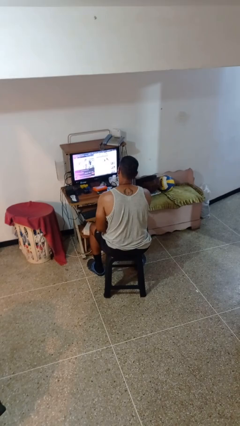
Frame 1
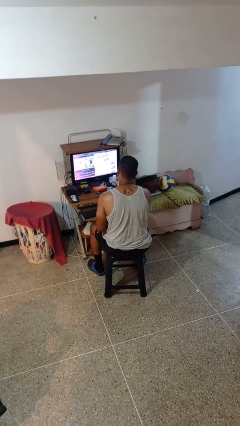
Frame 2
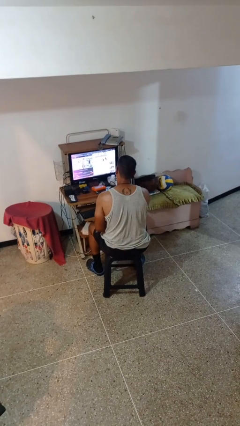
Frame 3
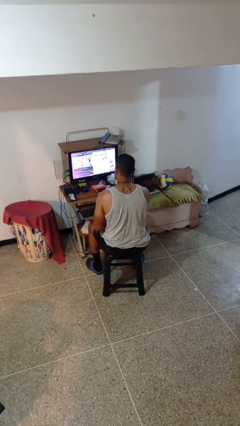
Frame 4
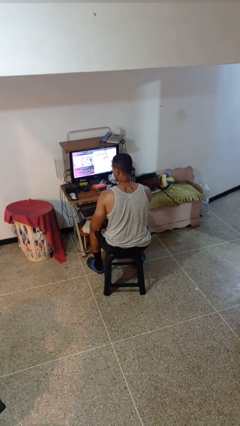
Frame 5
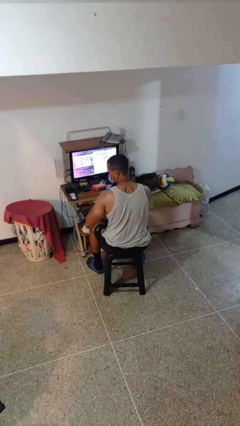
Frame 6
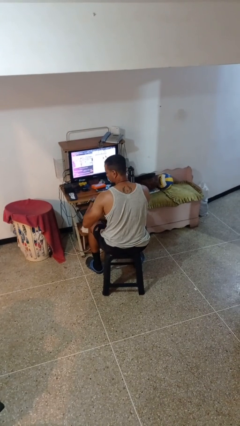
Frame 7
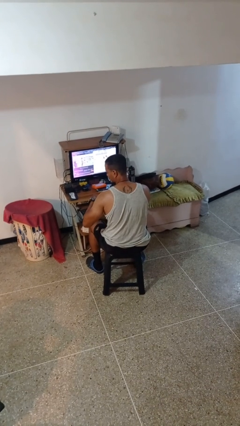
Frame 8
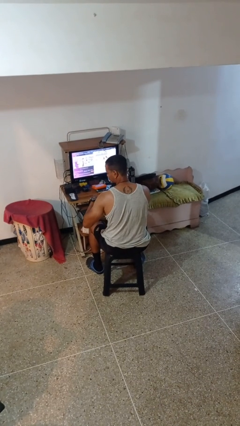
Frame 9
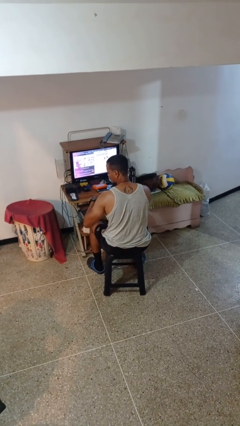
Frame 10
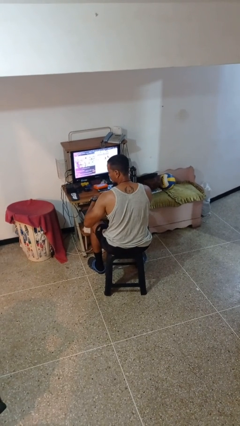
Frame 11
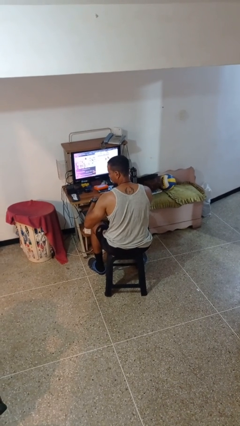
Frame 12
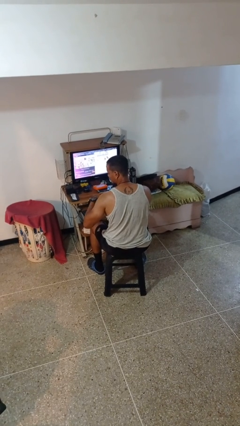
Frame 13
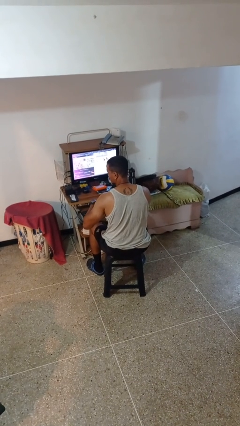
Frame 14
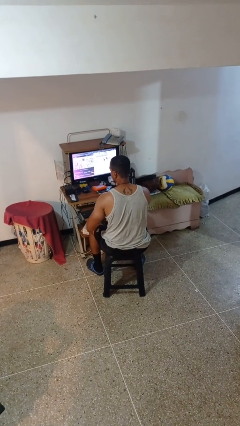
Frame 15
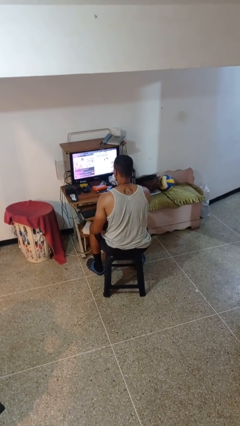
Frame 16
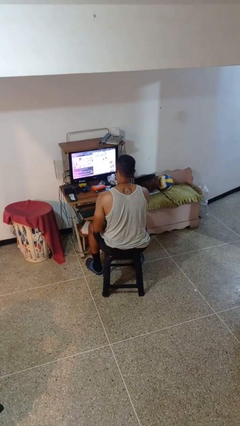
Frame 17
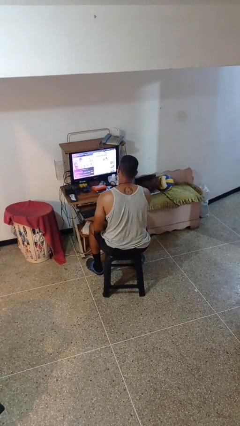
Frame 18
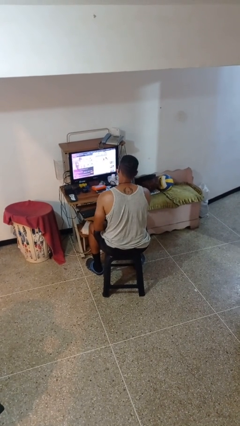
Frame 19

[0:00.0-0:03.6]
person looks at wristwatch

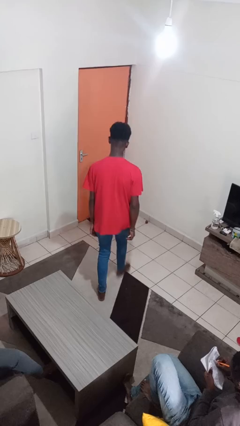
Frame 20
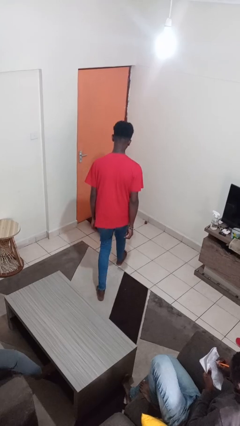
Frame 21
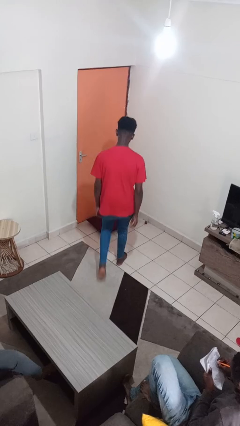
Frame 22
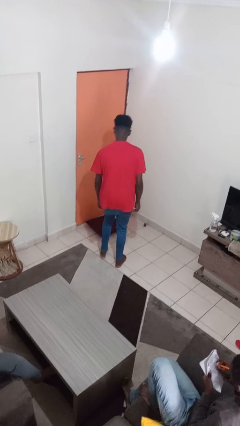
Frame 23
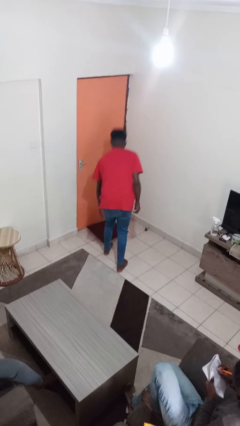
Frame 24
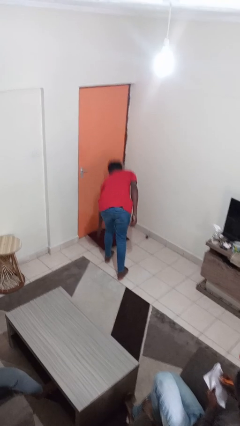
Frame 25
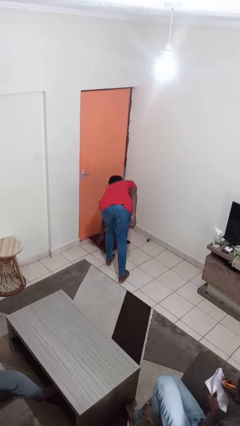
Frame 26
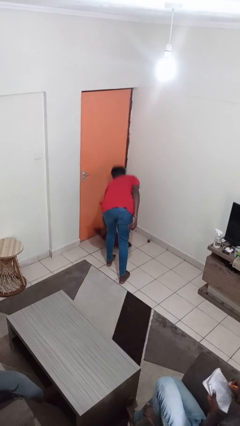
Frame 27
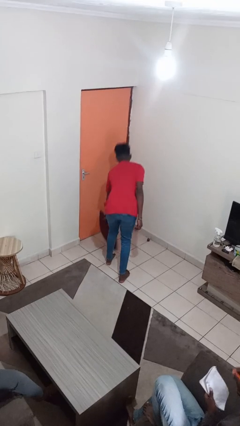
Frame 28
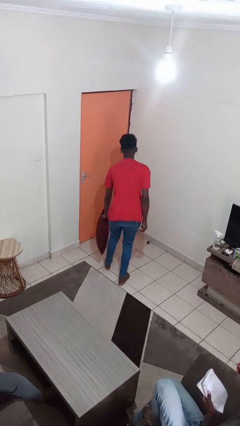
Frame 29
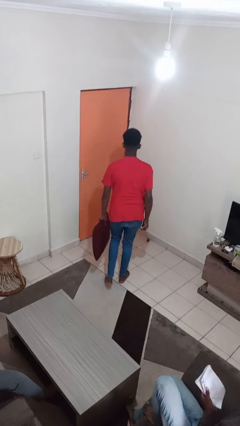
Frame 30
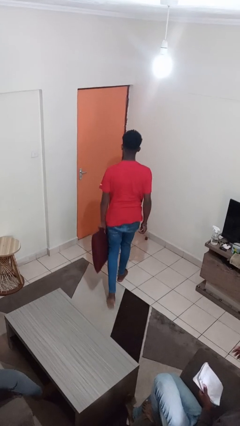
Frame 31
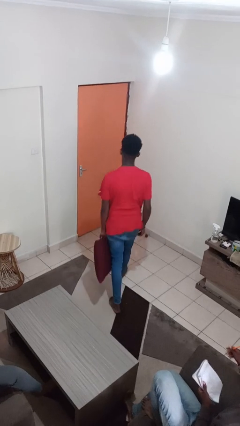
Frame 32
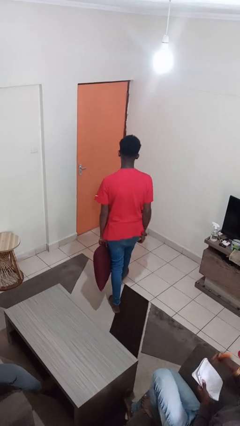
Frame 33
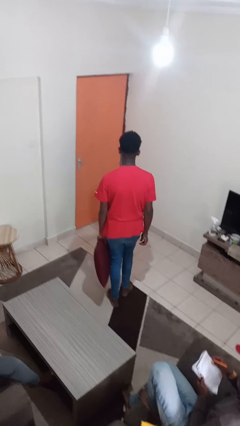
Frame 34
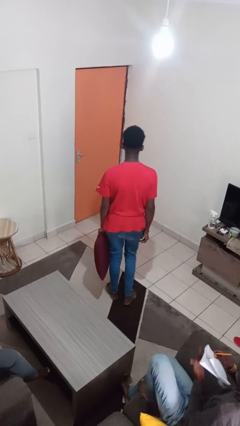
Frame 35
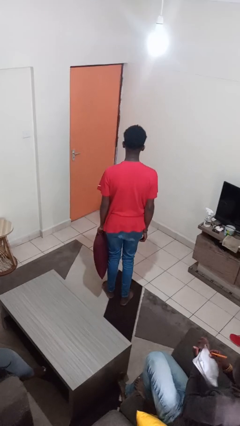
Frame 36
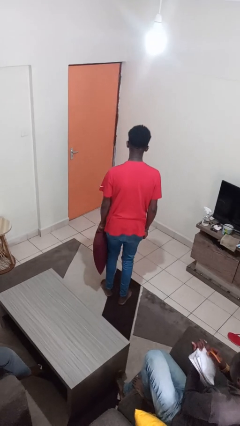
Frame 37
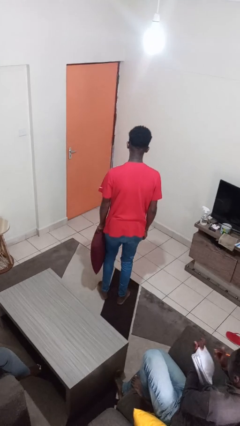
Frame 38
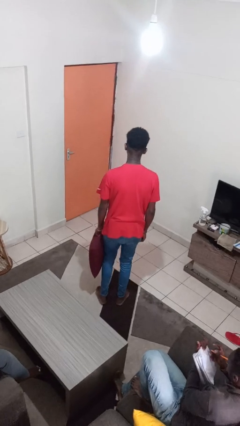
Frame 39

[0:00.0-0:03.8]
person picks up object from floor

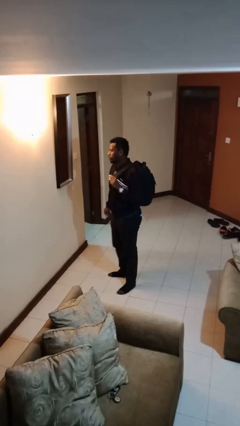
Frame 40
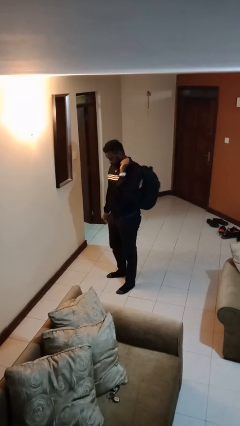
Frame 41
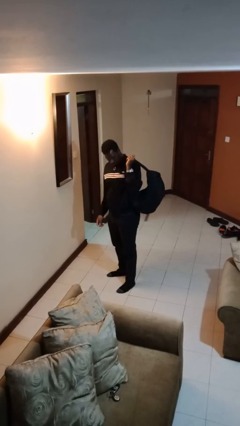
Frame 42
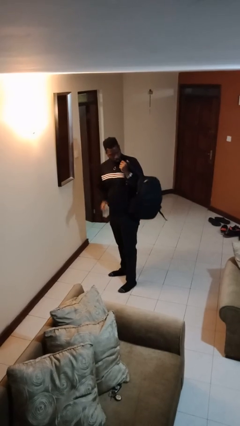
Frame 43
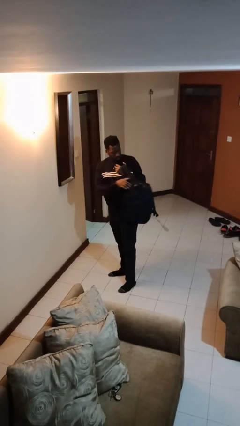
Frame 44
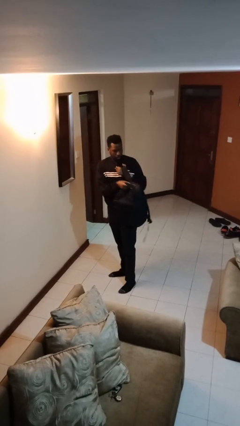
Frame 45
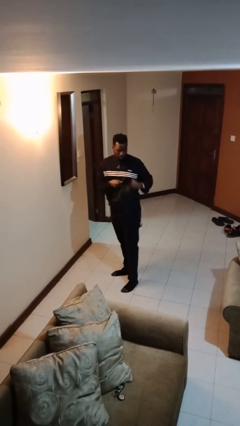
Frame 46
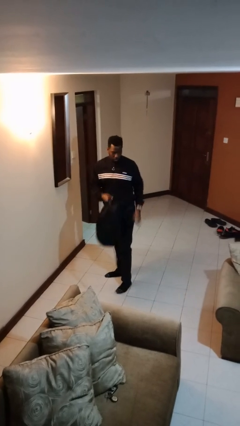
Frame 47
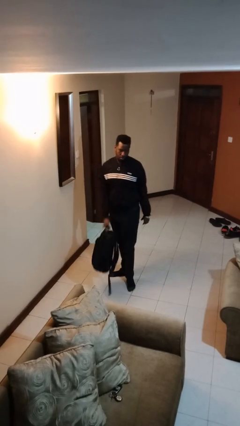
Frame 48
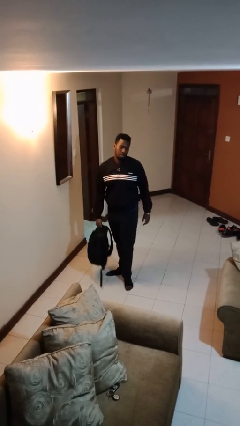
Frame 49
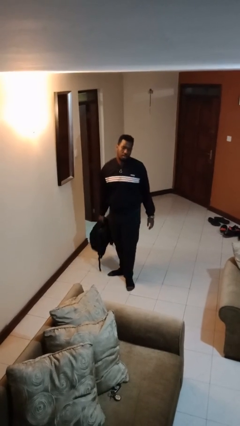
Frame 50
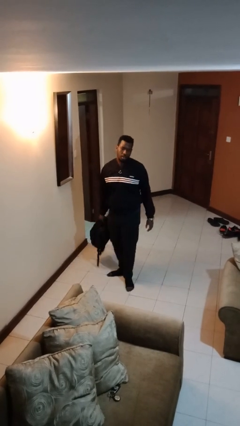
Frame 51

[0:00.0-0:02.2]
person takes off backpack

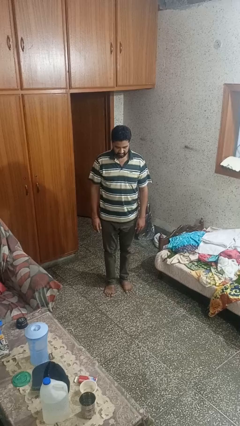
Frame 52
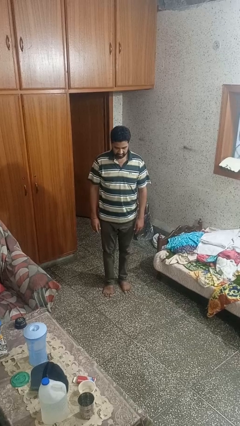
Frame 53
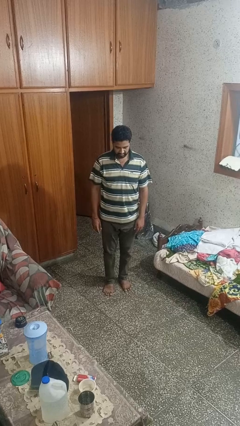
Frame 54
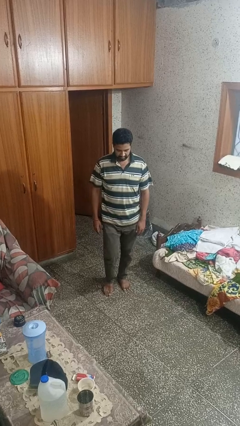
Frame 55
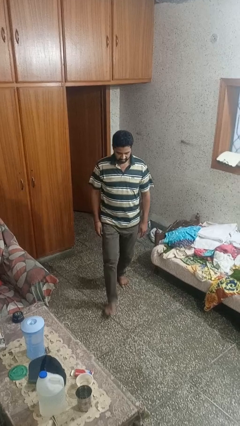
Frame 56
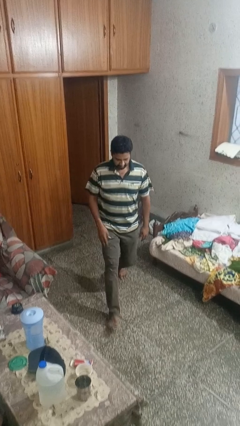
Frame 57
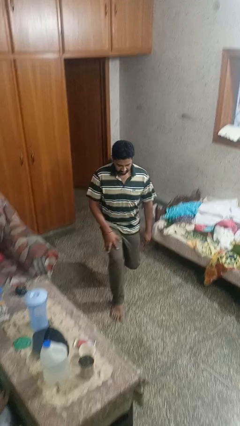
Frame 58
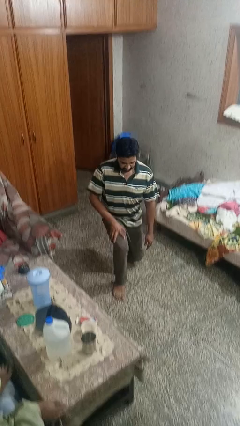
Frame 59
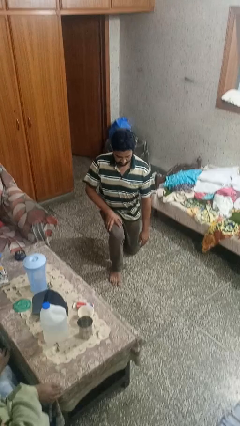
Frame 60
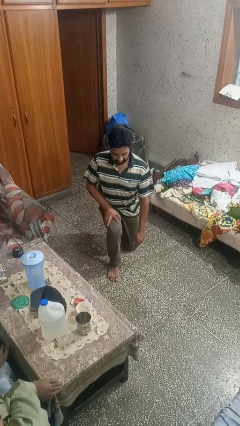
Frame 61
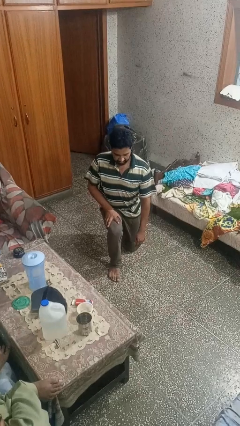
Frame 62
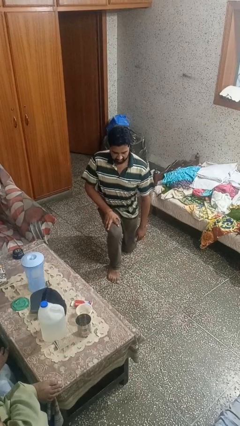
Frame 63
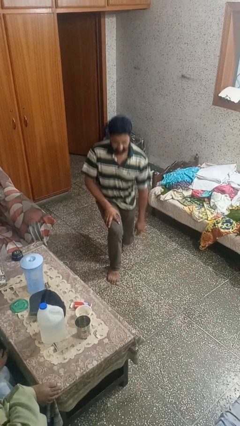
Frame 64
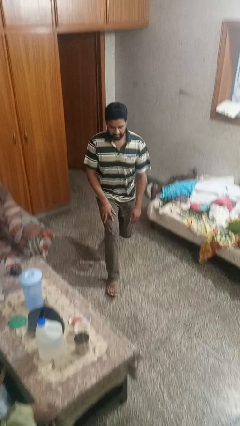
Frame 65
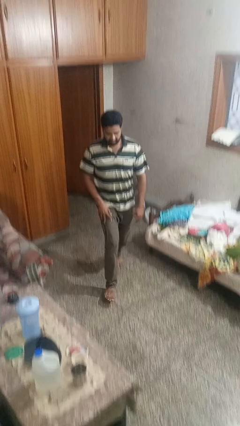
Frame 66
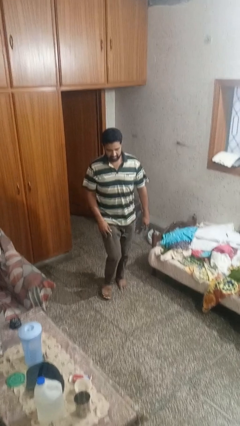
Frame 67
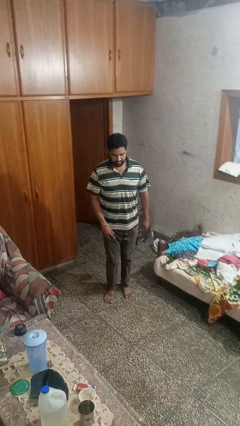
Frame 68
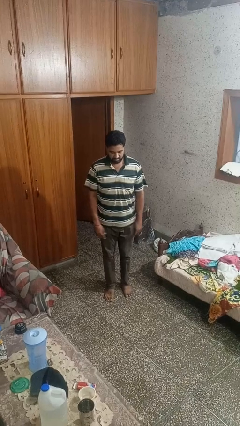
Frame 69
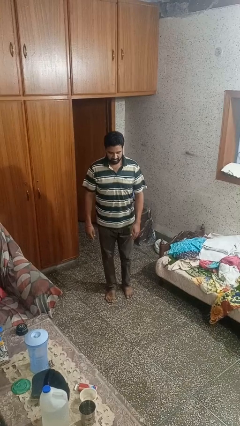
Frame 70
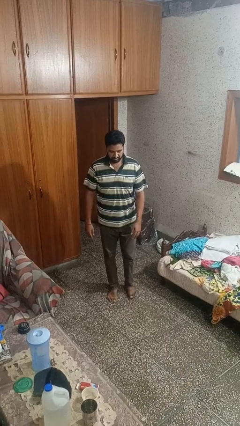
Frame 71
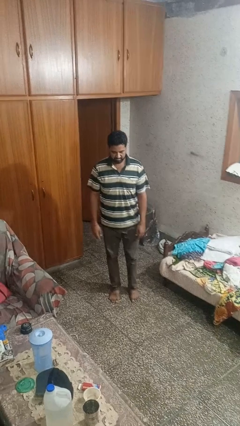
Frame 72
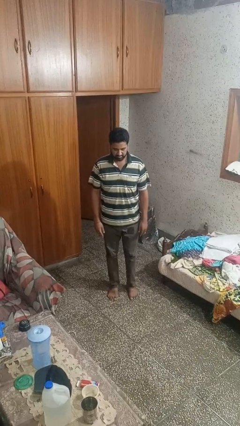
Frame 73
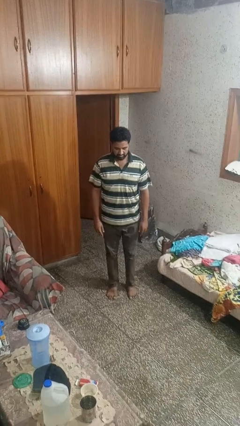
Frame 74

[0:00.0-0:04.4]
person exercises with lunges

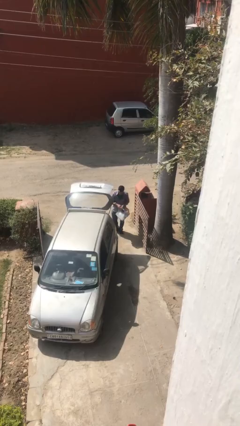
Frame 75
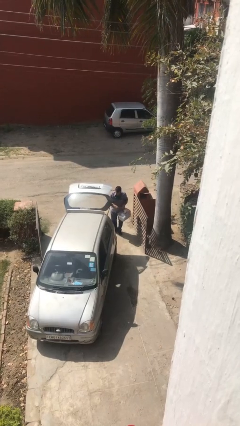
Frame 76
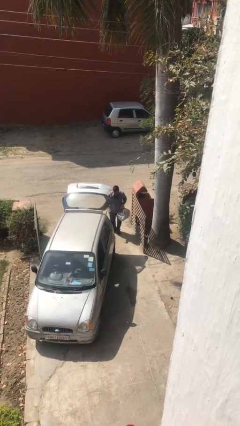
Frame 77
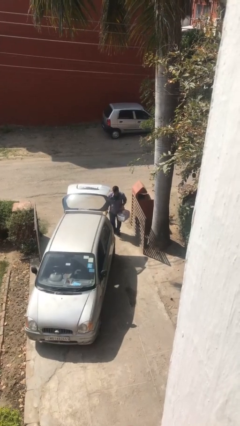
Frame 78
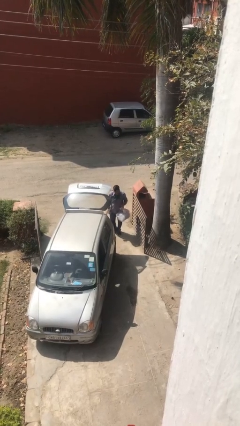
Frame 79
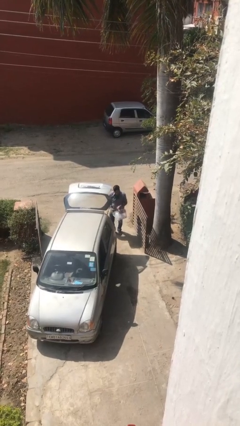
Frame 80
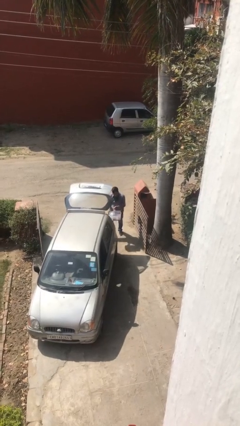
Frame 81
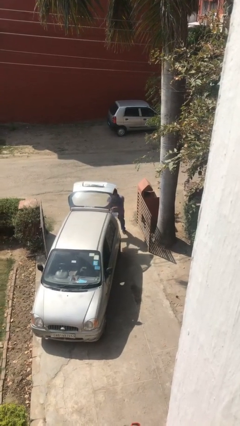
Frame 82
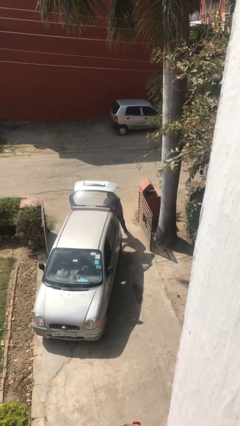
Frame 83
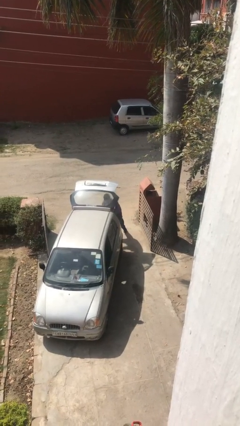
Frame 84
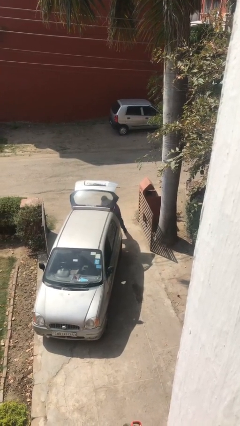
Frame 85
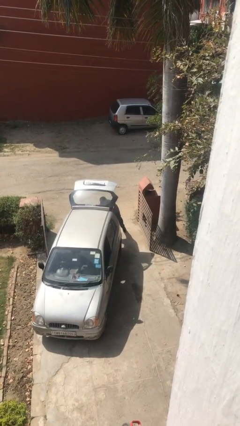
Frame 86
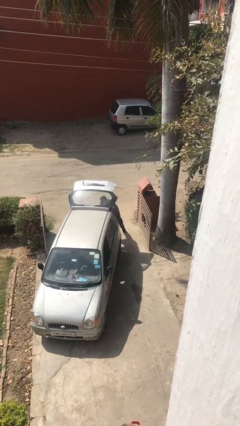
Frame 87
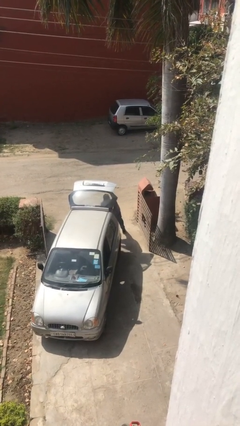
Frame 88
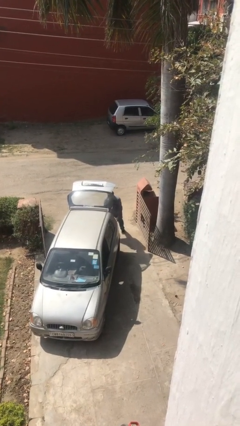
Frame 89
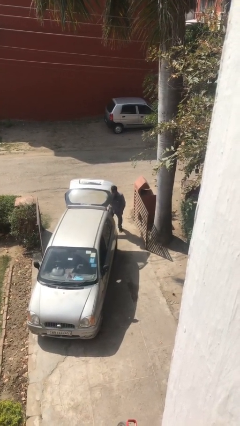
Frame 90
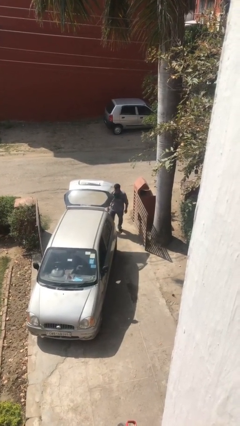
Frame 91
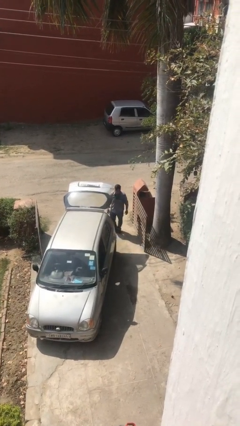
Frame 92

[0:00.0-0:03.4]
person loads car

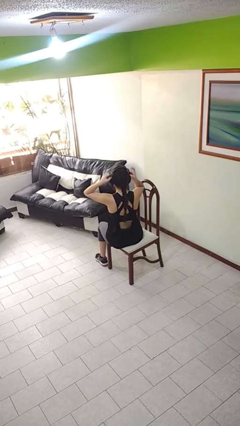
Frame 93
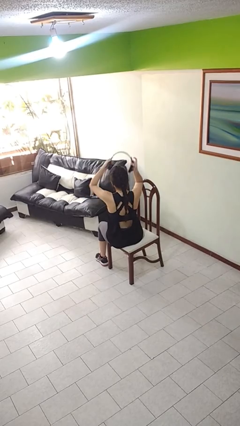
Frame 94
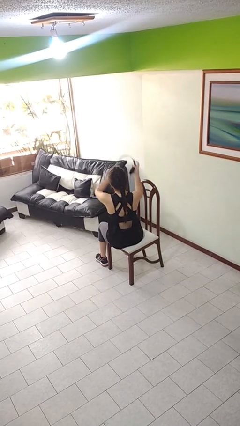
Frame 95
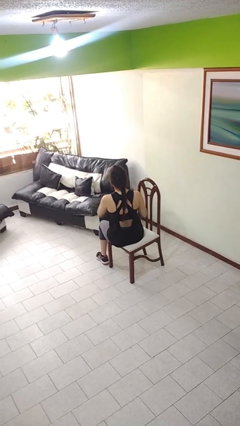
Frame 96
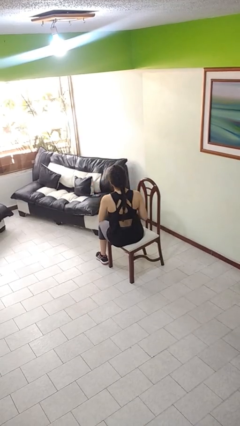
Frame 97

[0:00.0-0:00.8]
person takes off headphones
